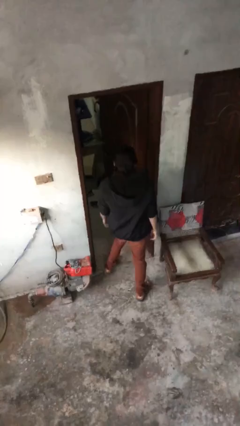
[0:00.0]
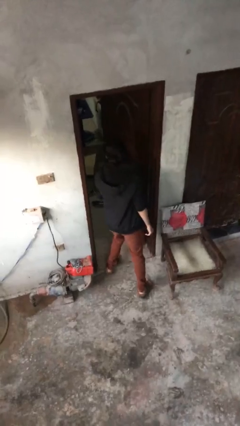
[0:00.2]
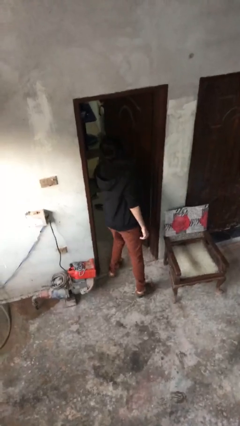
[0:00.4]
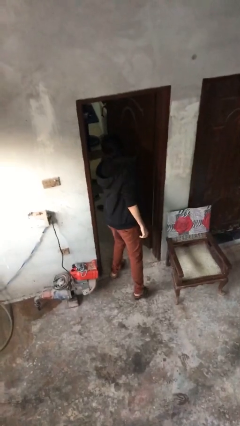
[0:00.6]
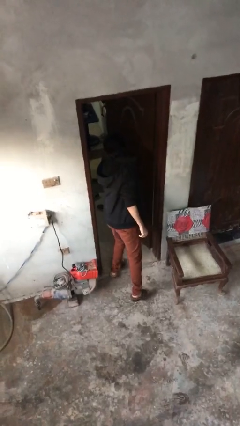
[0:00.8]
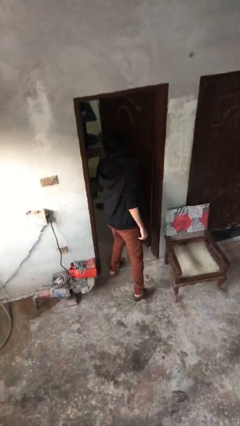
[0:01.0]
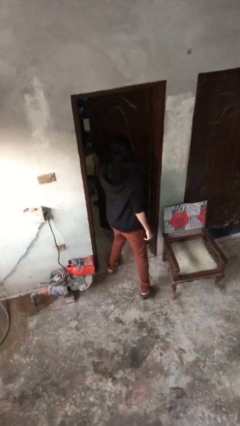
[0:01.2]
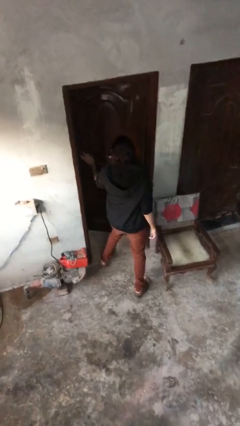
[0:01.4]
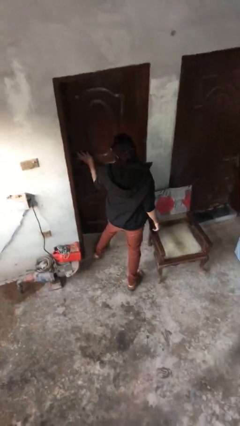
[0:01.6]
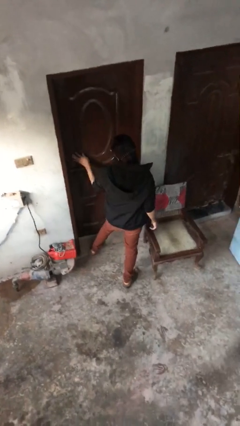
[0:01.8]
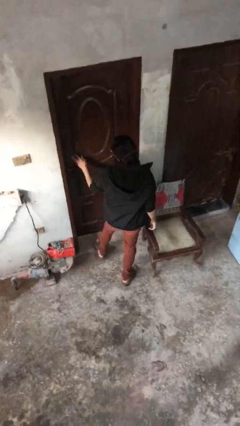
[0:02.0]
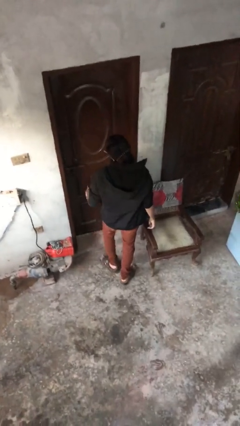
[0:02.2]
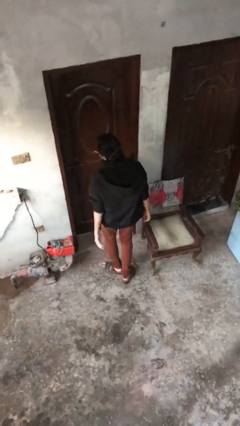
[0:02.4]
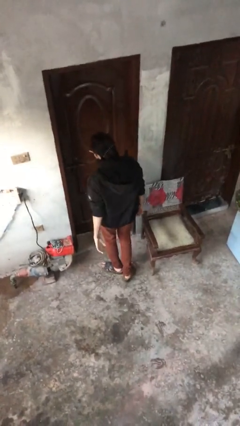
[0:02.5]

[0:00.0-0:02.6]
person closes facility door

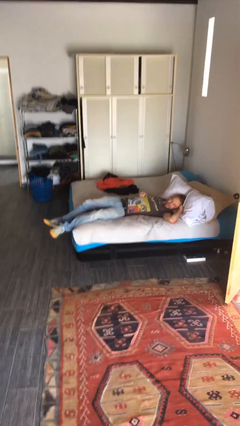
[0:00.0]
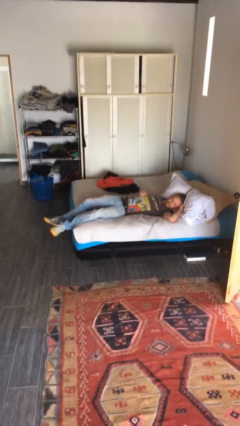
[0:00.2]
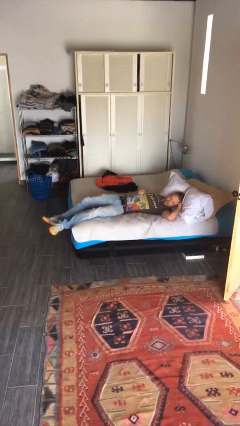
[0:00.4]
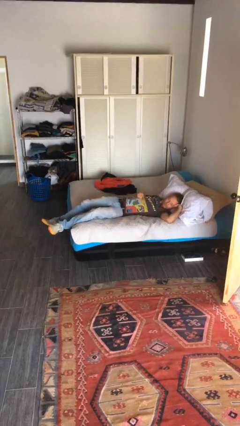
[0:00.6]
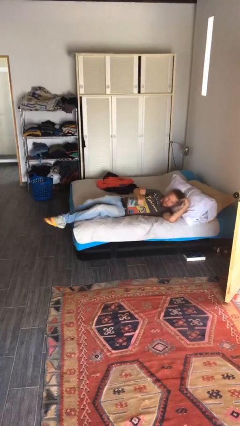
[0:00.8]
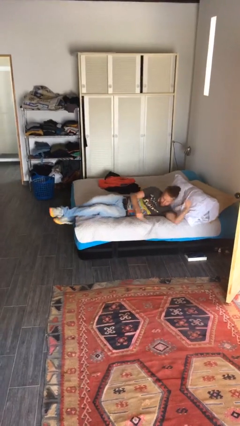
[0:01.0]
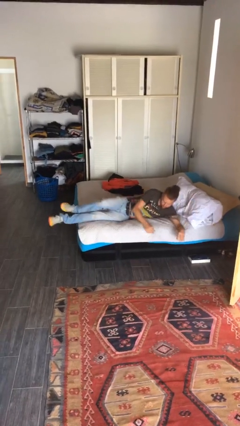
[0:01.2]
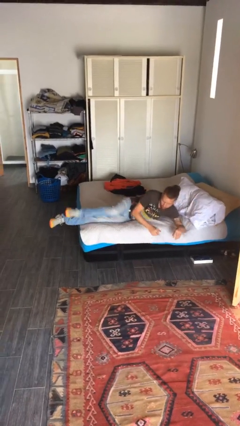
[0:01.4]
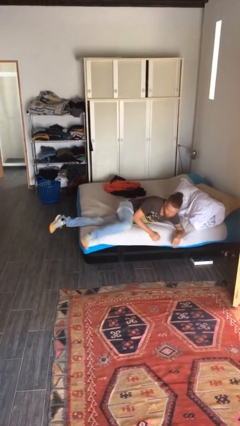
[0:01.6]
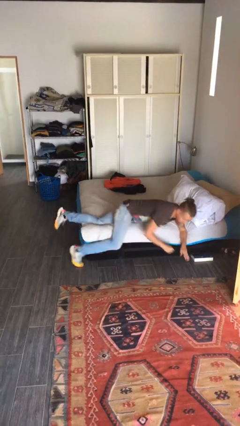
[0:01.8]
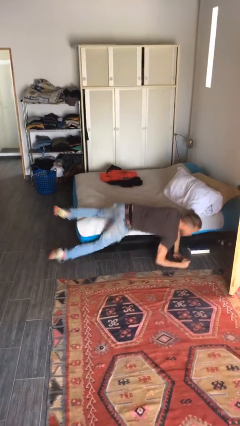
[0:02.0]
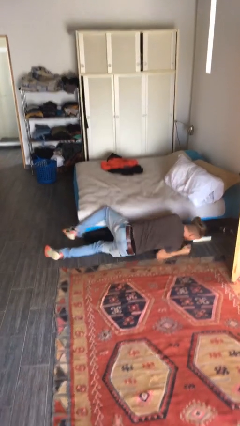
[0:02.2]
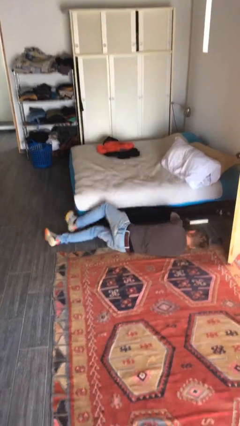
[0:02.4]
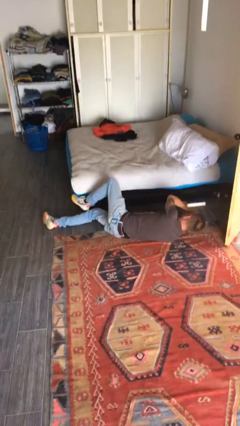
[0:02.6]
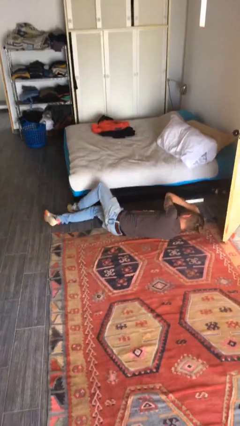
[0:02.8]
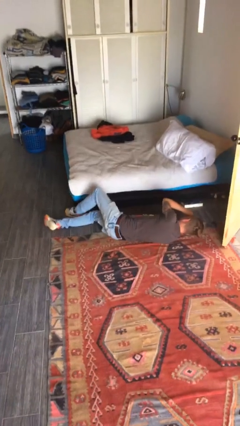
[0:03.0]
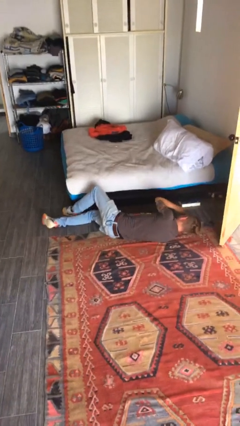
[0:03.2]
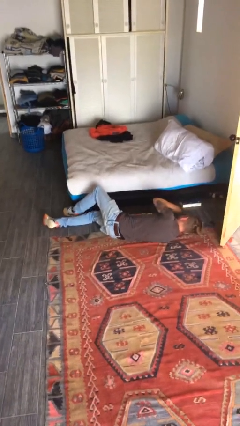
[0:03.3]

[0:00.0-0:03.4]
person falls from bed

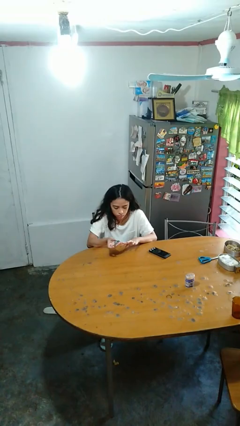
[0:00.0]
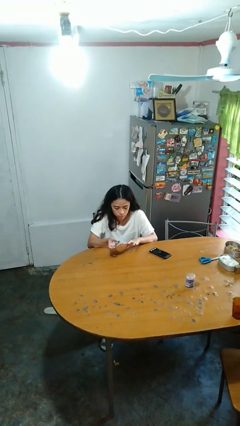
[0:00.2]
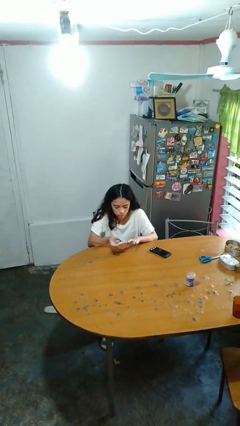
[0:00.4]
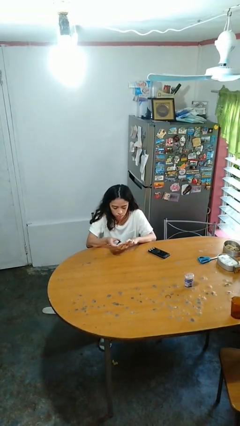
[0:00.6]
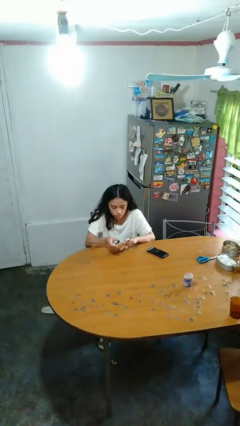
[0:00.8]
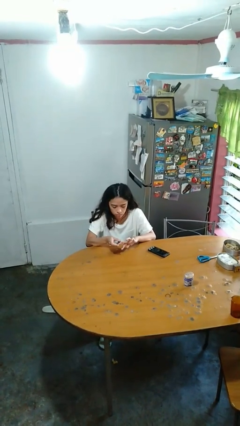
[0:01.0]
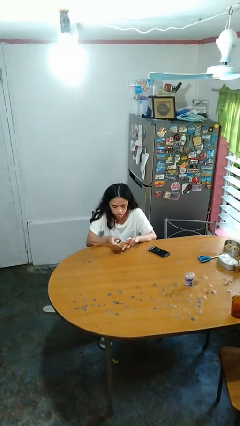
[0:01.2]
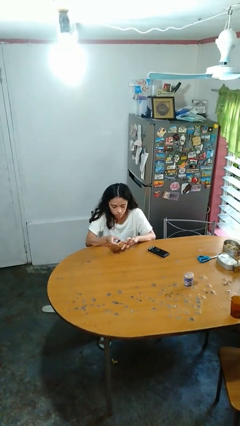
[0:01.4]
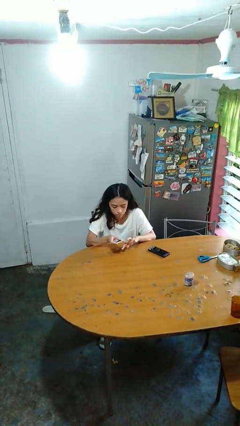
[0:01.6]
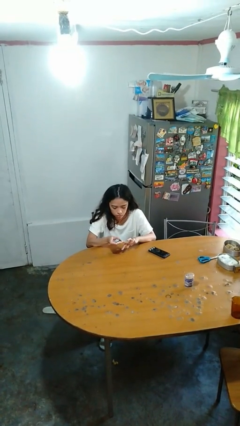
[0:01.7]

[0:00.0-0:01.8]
person clips fingernails

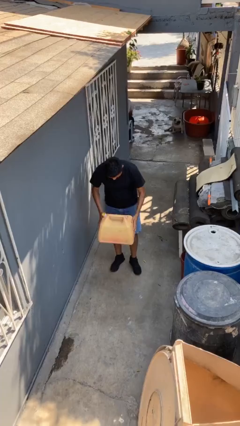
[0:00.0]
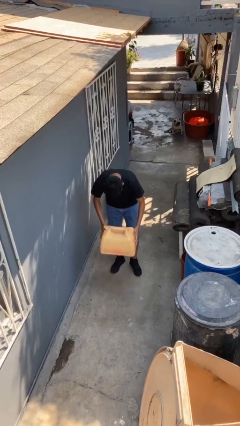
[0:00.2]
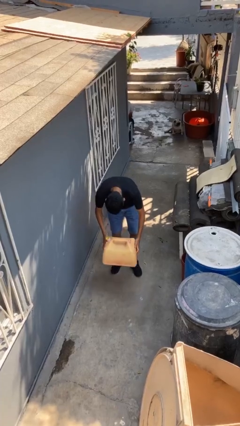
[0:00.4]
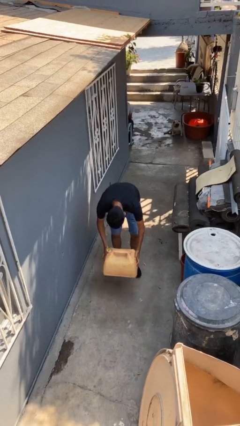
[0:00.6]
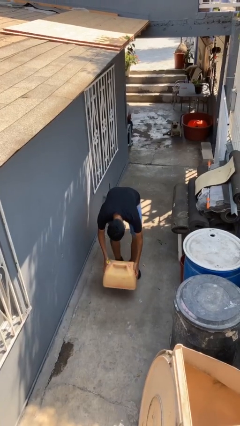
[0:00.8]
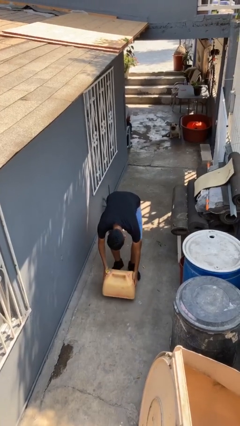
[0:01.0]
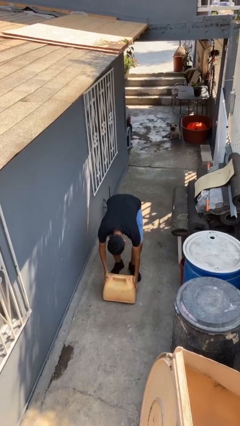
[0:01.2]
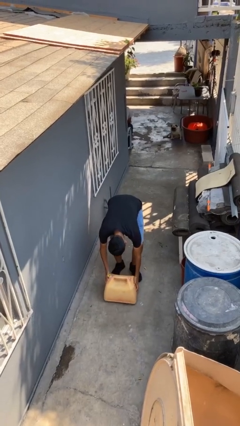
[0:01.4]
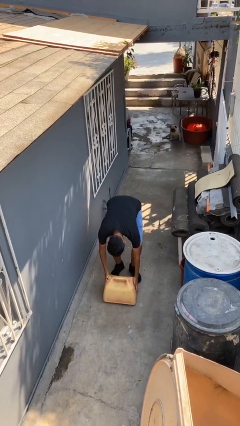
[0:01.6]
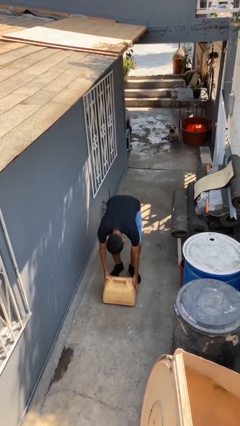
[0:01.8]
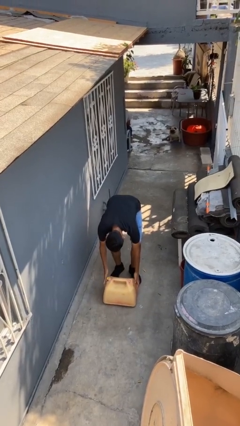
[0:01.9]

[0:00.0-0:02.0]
person puts down object on floor

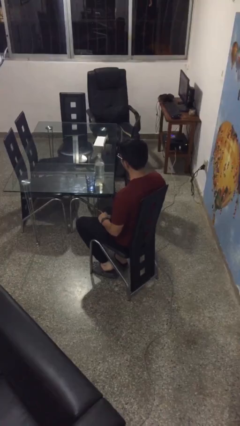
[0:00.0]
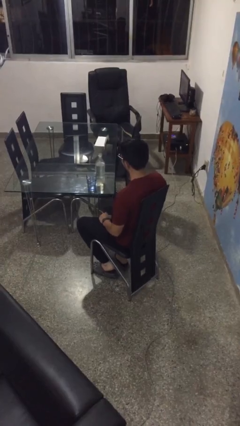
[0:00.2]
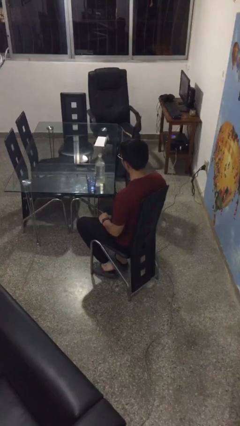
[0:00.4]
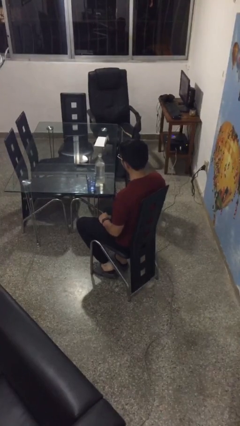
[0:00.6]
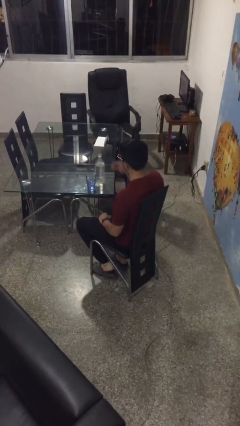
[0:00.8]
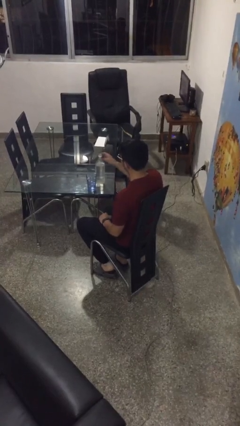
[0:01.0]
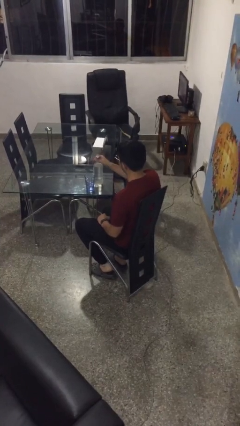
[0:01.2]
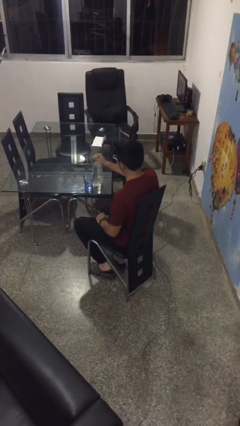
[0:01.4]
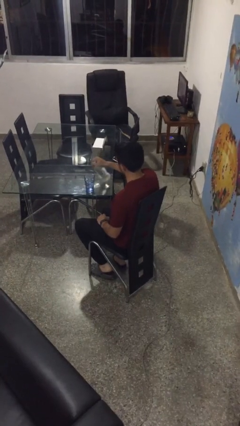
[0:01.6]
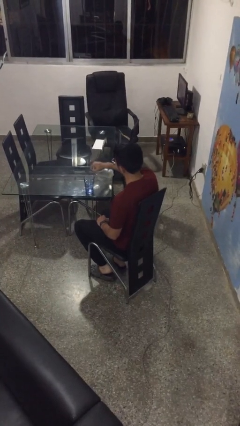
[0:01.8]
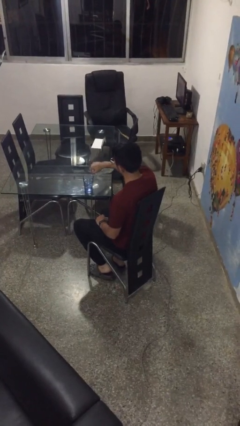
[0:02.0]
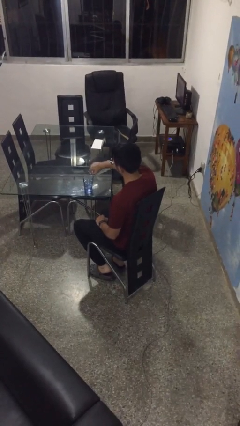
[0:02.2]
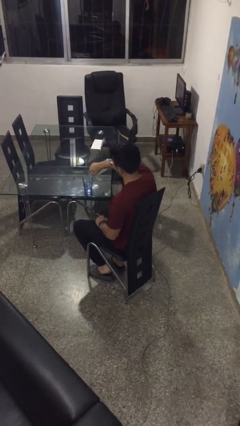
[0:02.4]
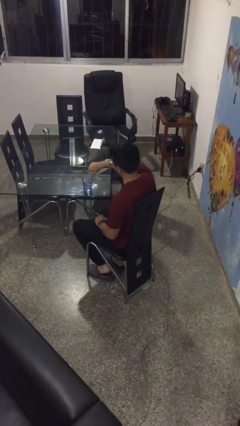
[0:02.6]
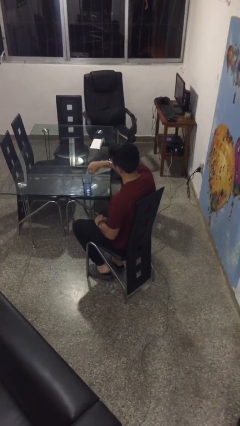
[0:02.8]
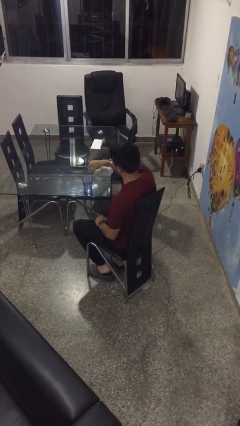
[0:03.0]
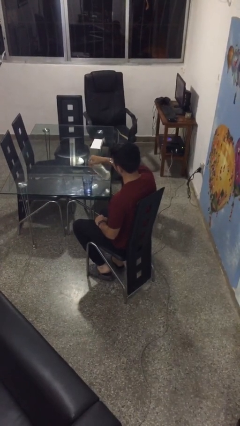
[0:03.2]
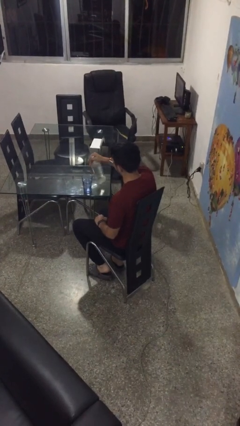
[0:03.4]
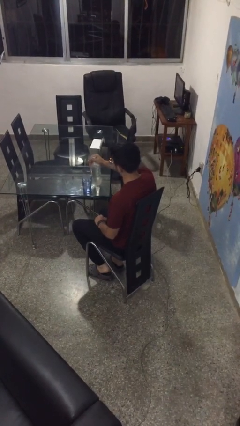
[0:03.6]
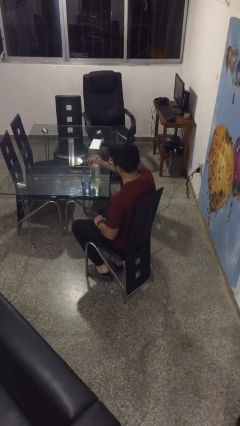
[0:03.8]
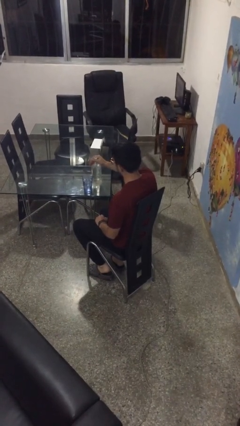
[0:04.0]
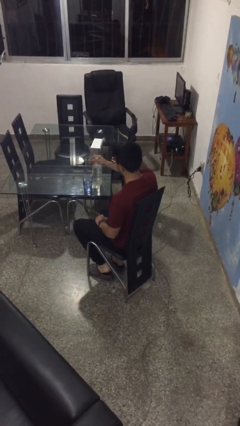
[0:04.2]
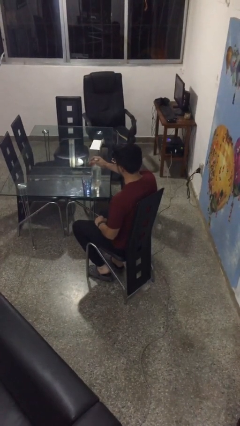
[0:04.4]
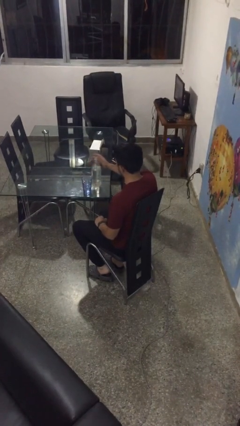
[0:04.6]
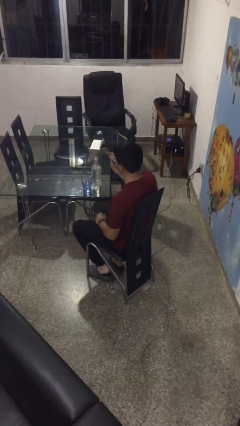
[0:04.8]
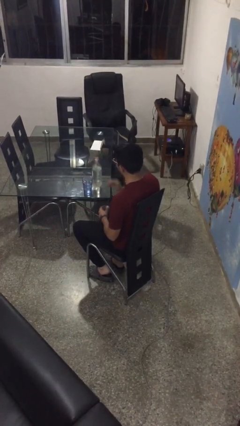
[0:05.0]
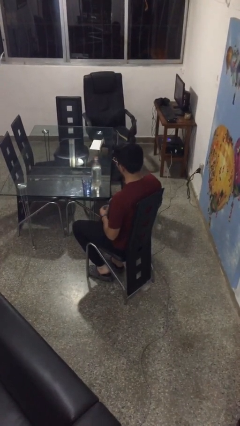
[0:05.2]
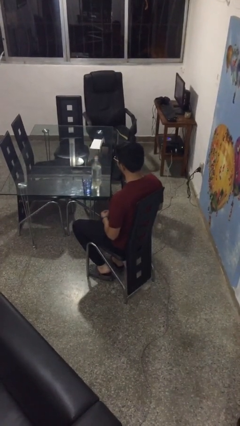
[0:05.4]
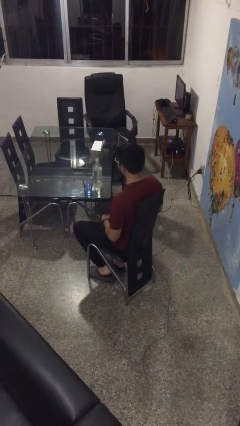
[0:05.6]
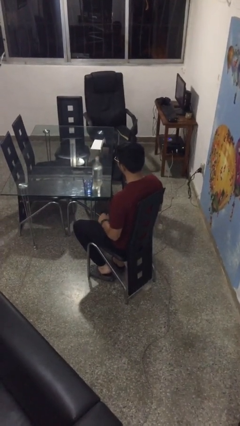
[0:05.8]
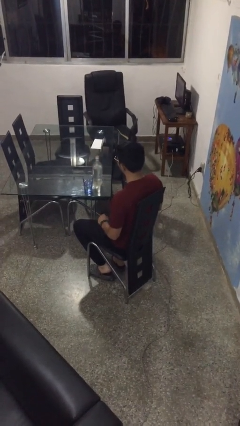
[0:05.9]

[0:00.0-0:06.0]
person pours liquid into cup

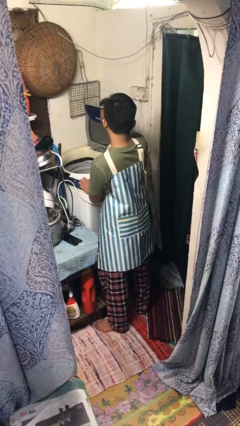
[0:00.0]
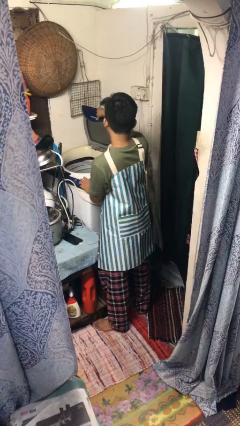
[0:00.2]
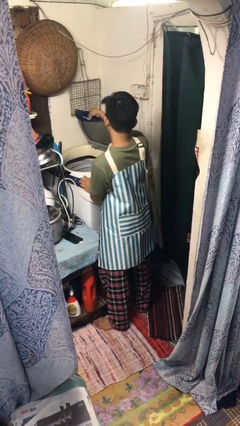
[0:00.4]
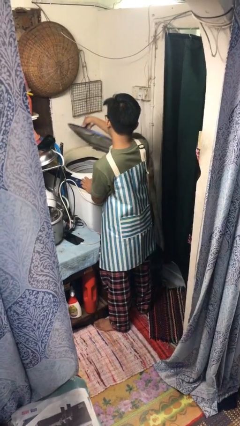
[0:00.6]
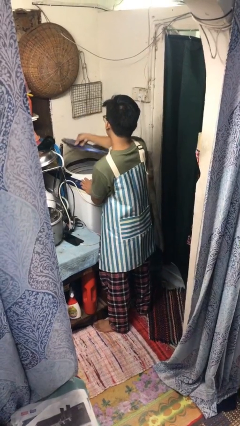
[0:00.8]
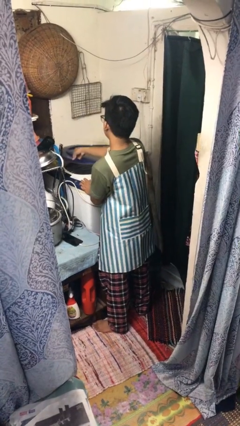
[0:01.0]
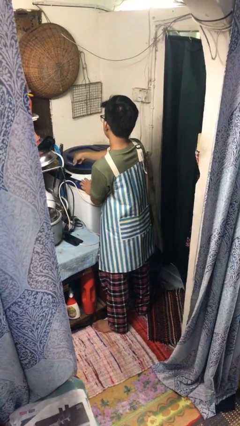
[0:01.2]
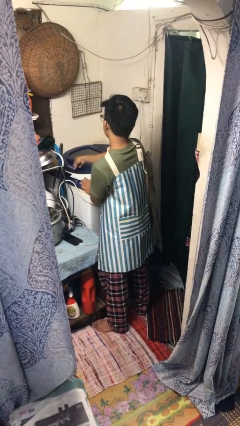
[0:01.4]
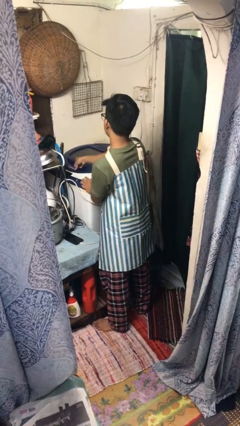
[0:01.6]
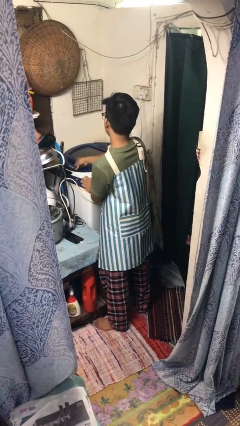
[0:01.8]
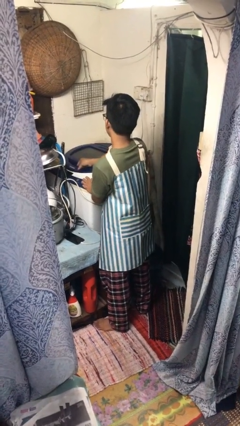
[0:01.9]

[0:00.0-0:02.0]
person closes clothes washer
